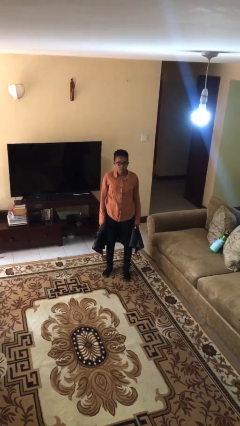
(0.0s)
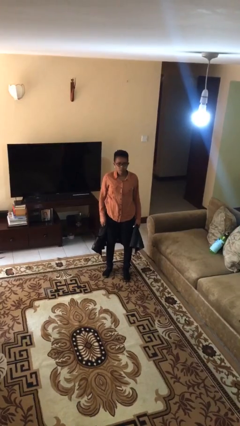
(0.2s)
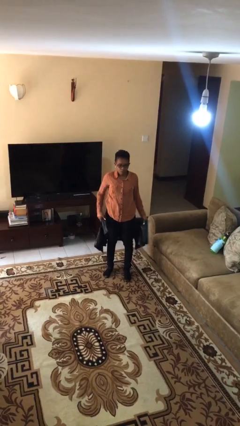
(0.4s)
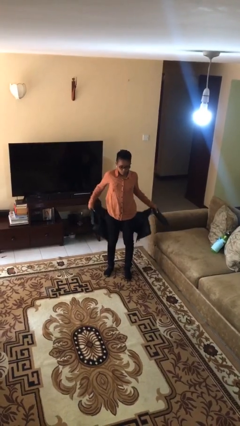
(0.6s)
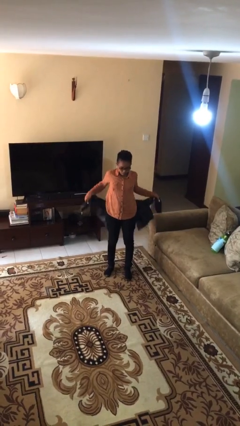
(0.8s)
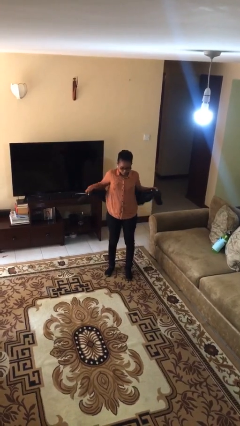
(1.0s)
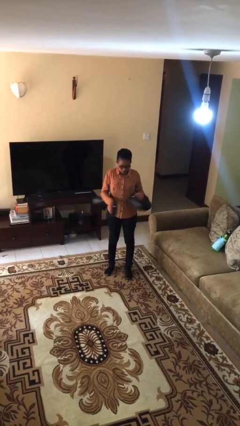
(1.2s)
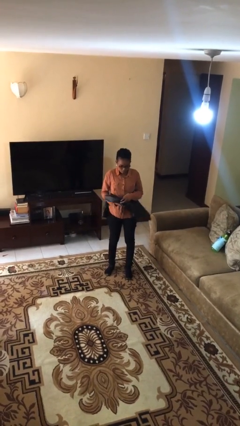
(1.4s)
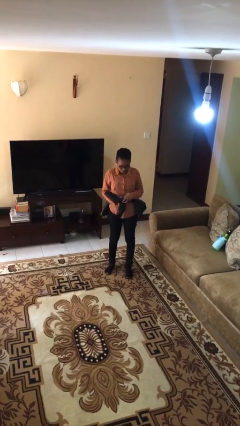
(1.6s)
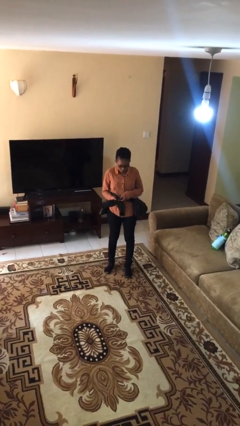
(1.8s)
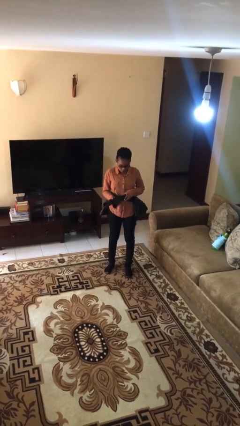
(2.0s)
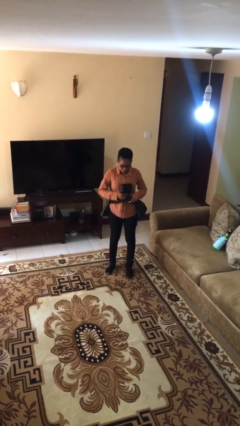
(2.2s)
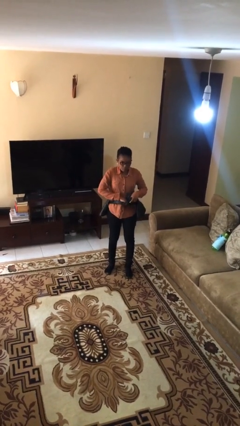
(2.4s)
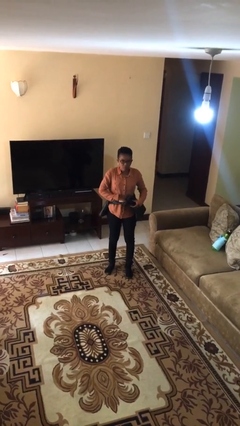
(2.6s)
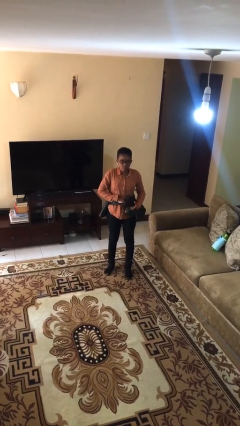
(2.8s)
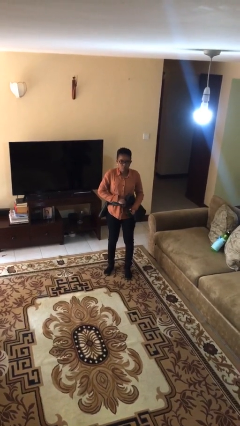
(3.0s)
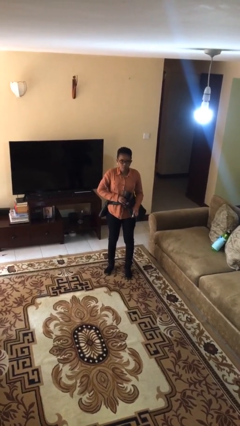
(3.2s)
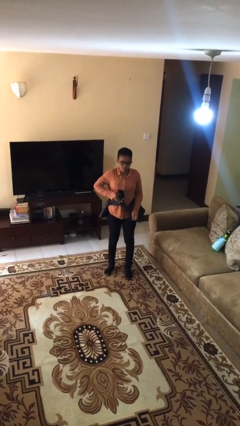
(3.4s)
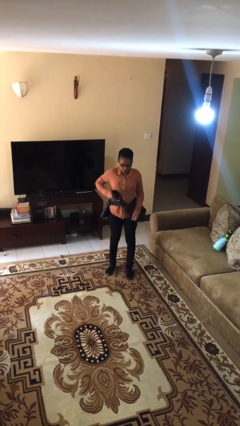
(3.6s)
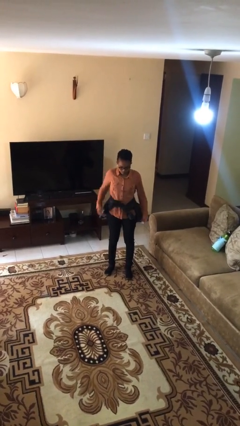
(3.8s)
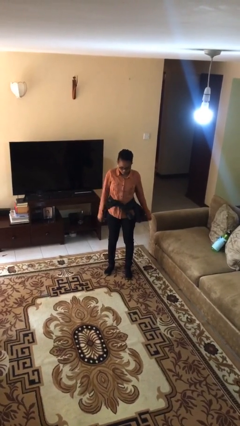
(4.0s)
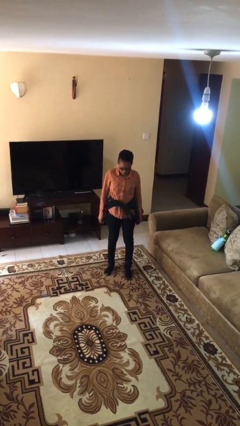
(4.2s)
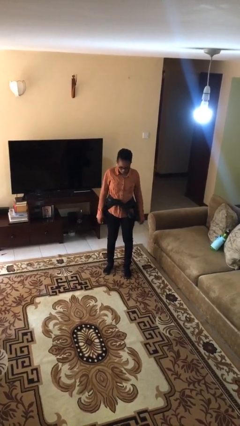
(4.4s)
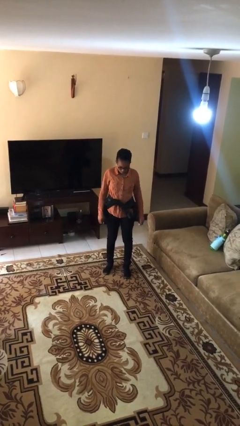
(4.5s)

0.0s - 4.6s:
person ties jacket around waist

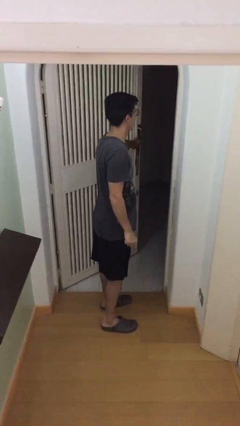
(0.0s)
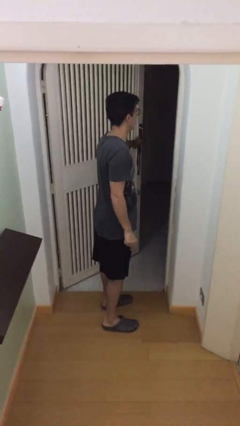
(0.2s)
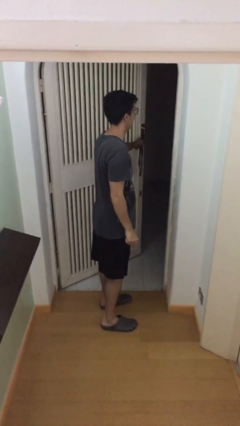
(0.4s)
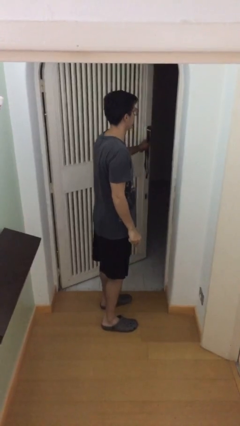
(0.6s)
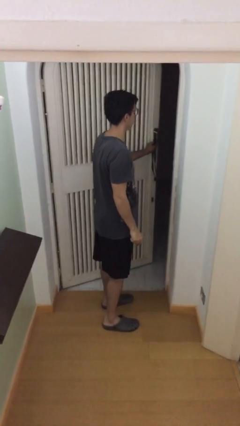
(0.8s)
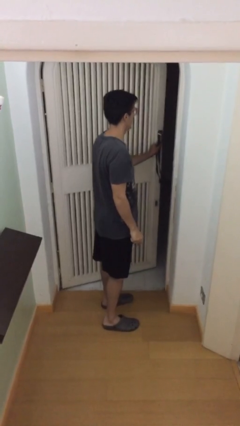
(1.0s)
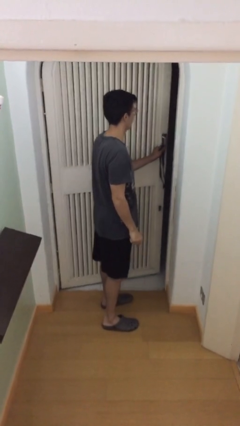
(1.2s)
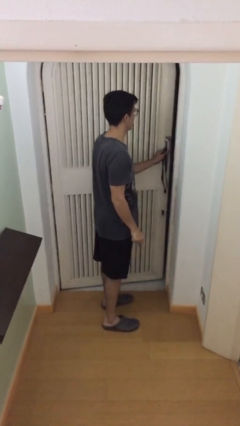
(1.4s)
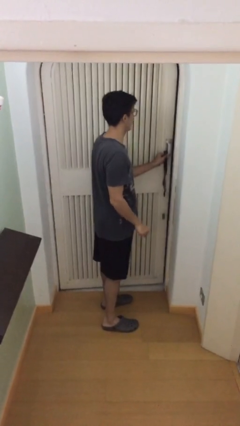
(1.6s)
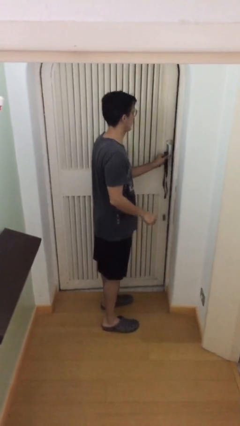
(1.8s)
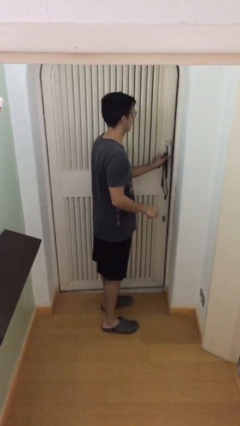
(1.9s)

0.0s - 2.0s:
person closes facility door

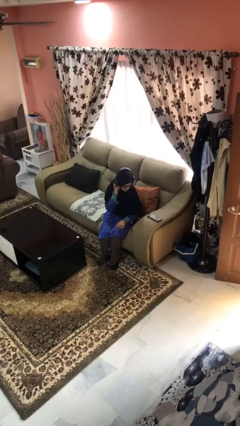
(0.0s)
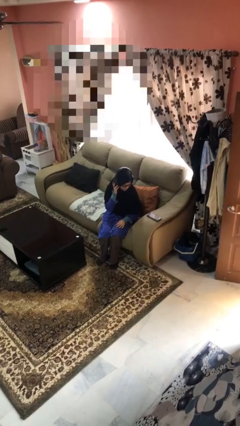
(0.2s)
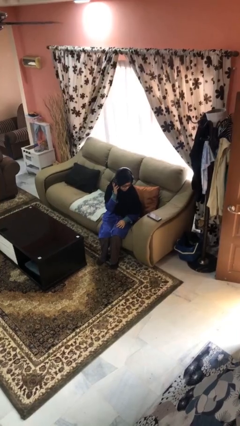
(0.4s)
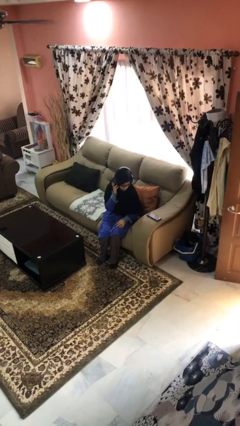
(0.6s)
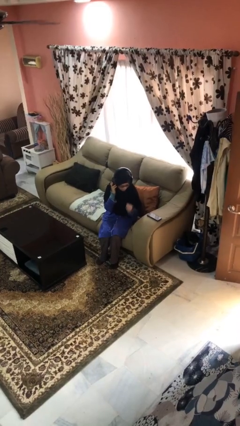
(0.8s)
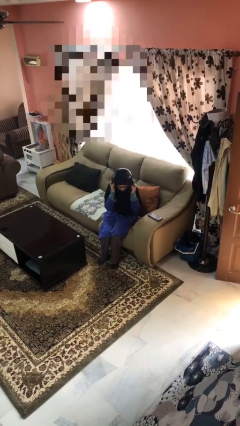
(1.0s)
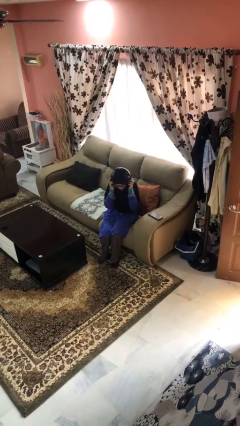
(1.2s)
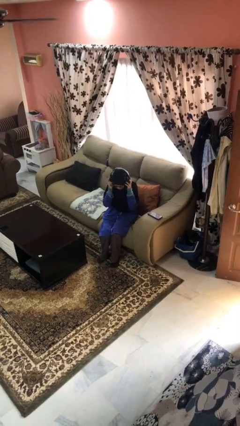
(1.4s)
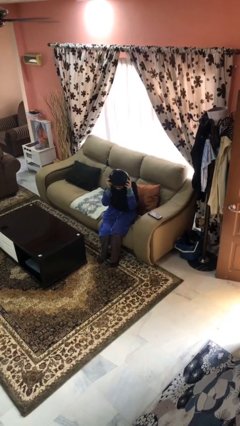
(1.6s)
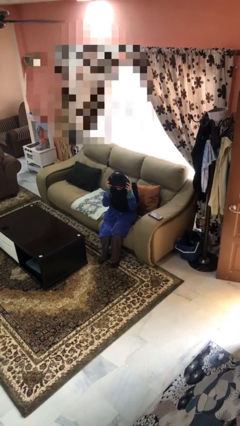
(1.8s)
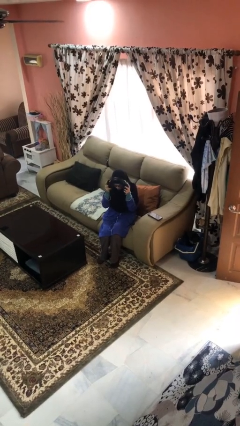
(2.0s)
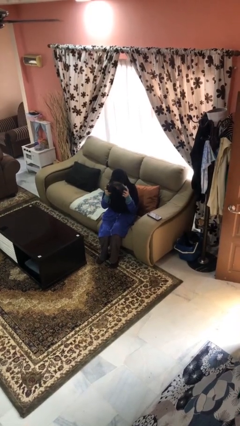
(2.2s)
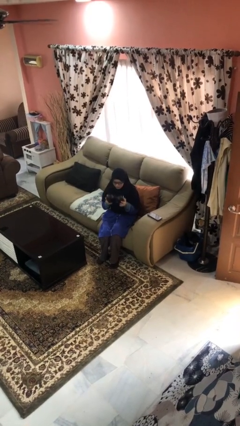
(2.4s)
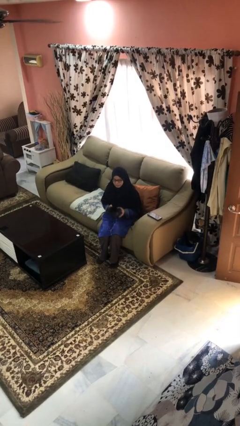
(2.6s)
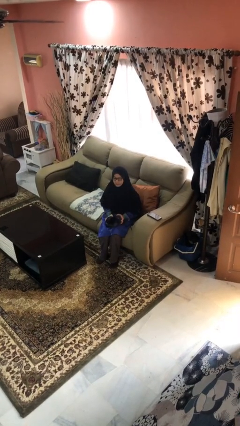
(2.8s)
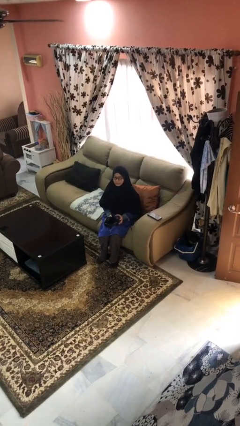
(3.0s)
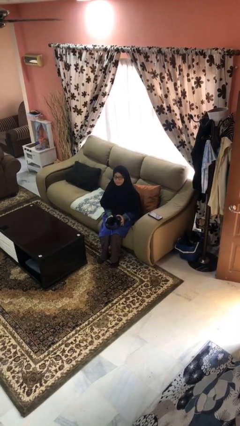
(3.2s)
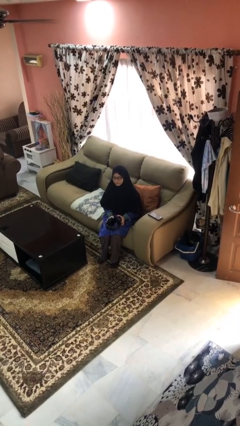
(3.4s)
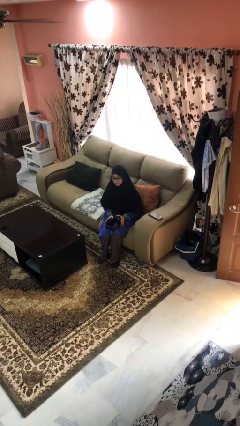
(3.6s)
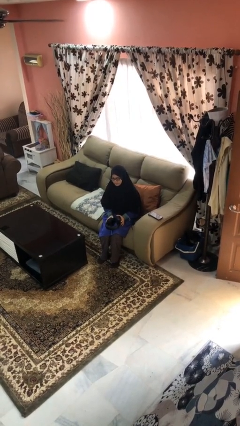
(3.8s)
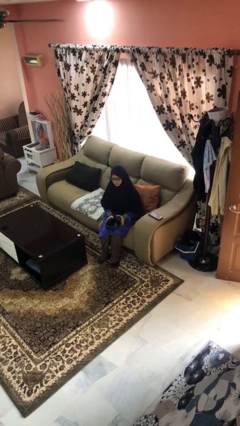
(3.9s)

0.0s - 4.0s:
person takes off headphones

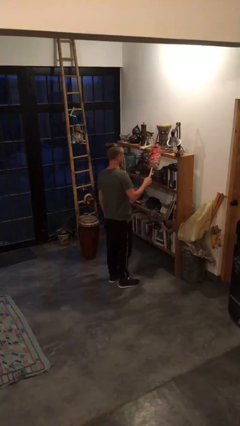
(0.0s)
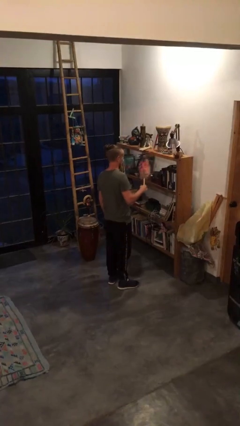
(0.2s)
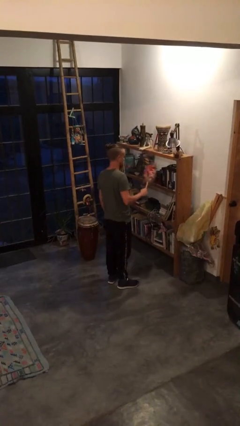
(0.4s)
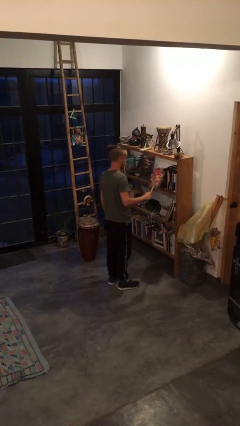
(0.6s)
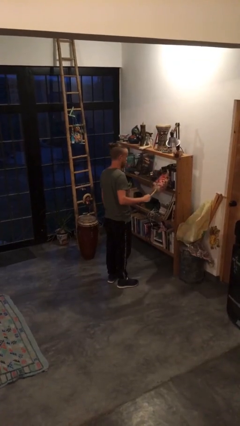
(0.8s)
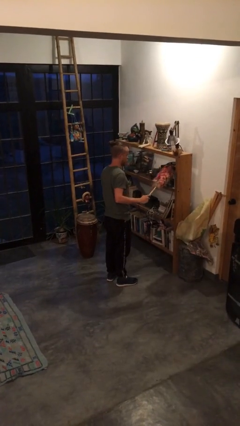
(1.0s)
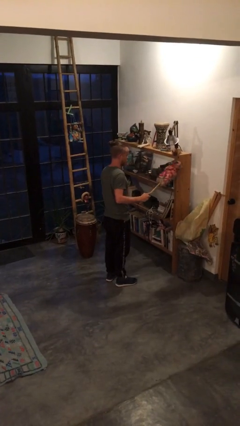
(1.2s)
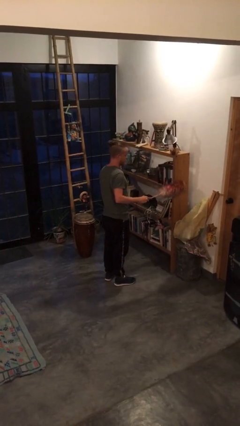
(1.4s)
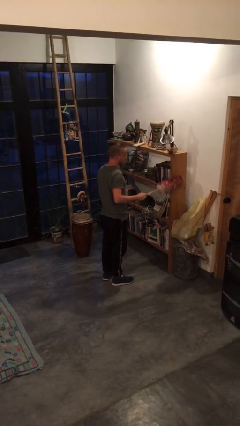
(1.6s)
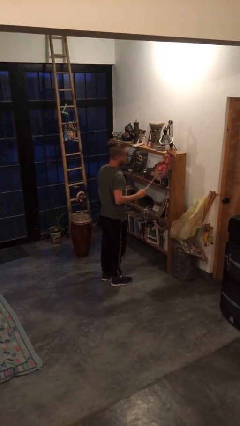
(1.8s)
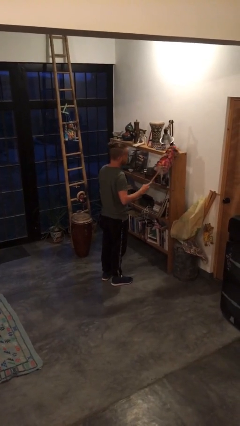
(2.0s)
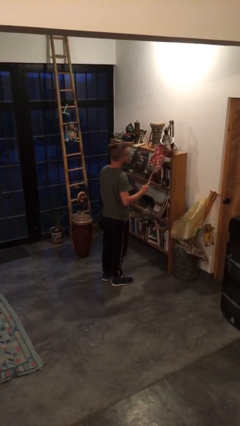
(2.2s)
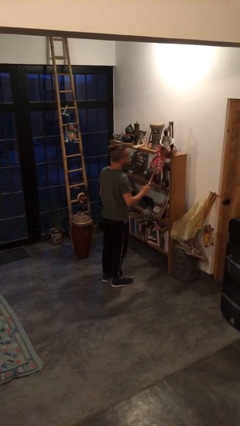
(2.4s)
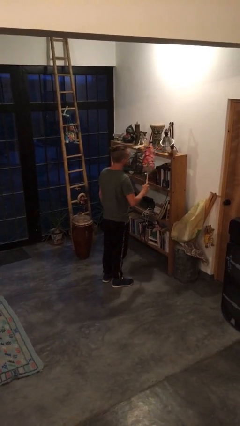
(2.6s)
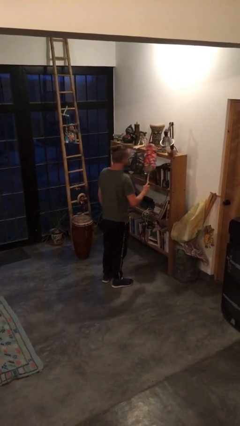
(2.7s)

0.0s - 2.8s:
person dusts furniture

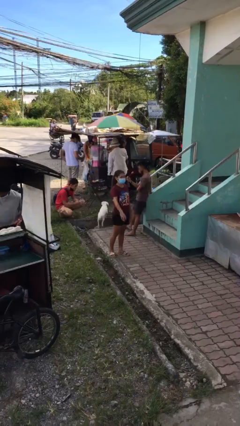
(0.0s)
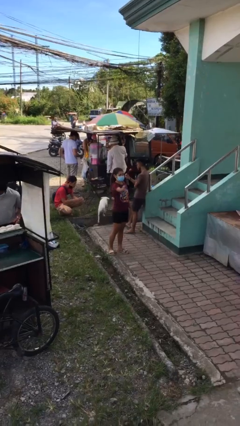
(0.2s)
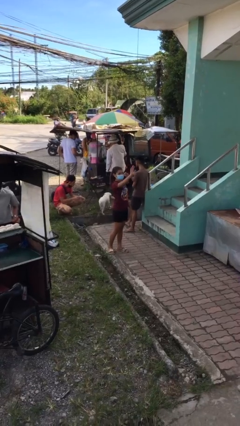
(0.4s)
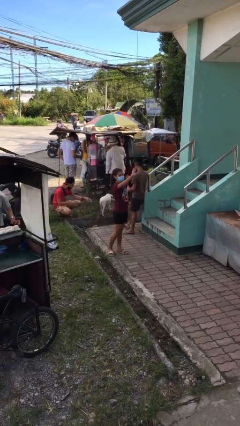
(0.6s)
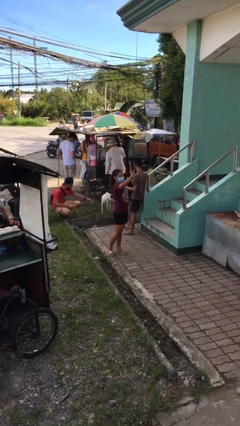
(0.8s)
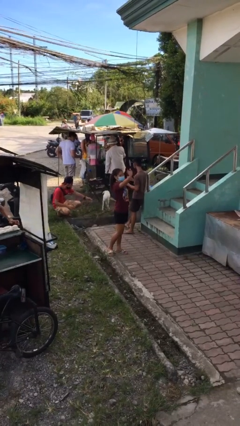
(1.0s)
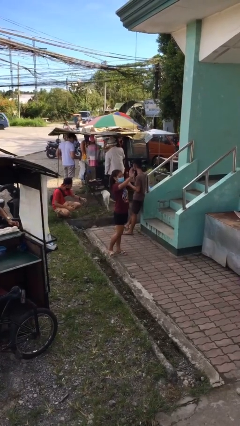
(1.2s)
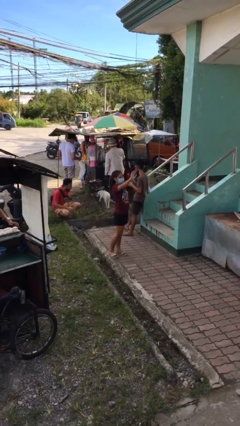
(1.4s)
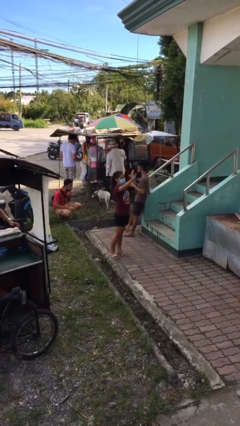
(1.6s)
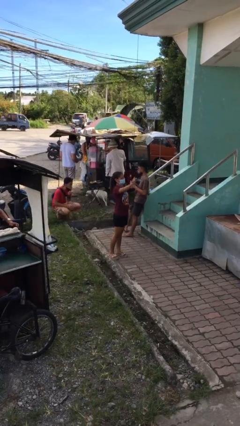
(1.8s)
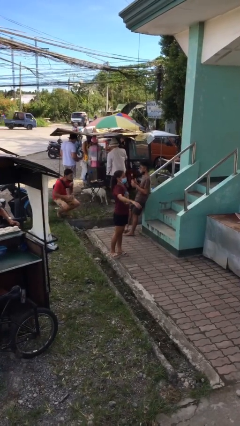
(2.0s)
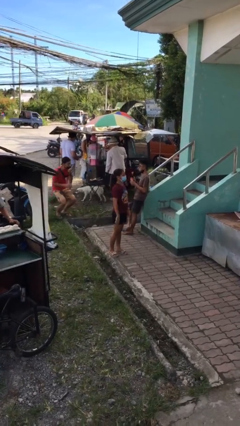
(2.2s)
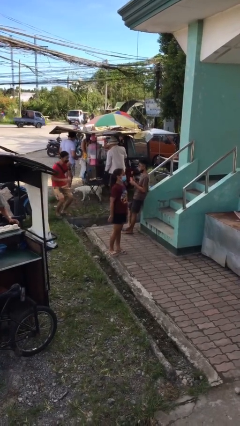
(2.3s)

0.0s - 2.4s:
person waves at person

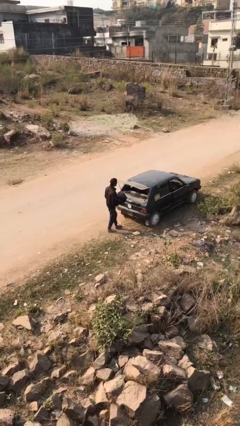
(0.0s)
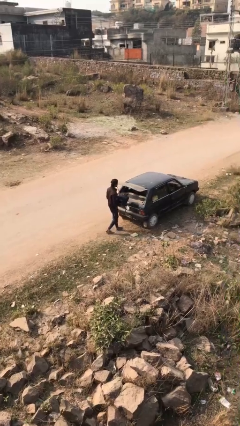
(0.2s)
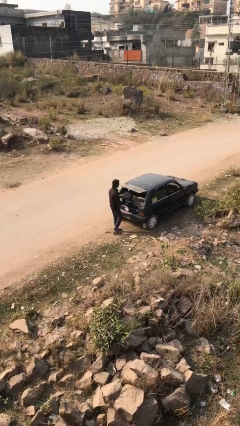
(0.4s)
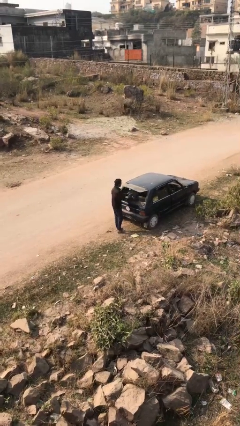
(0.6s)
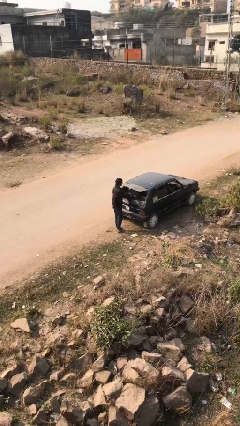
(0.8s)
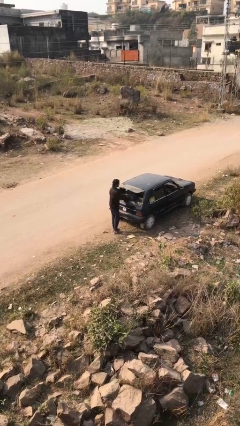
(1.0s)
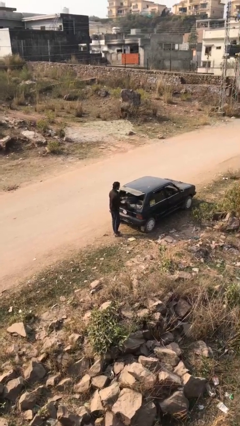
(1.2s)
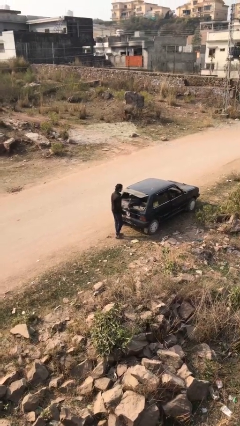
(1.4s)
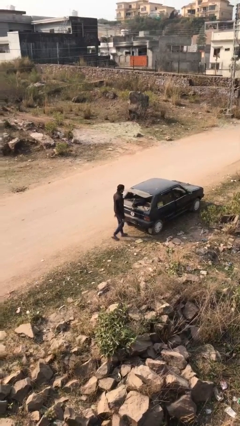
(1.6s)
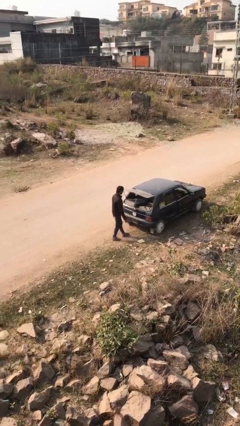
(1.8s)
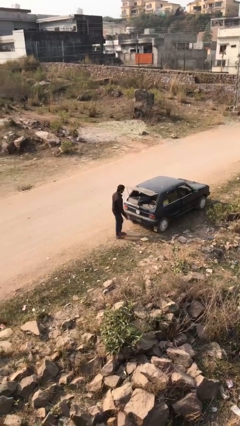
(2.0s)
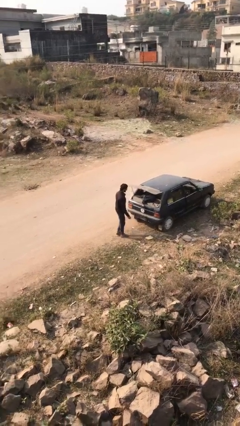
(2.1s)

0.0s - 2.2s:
person loads car
